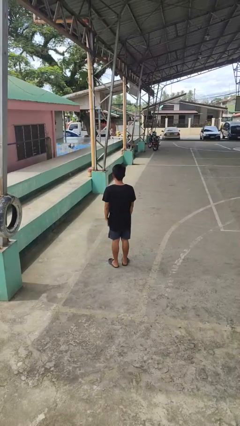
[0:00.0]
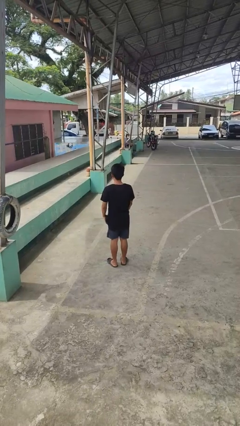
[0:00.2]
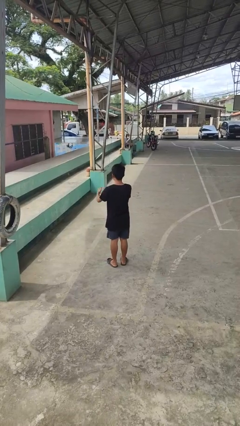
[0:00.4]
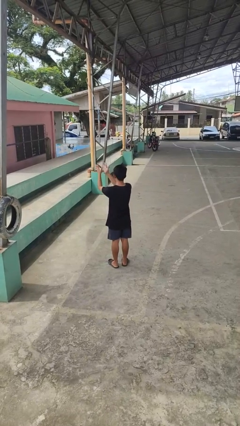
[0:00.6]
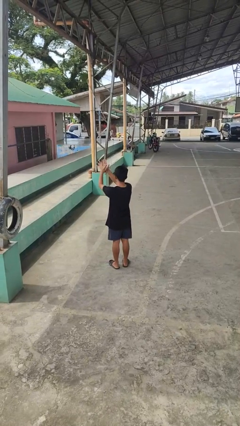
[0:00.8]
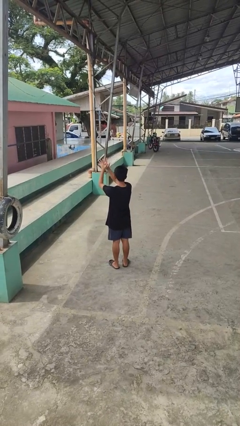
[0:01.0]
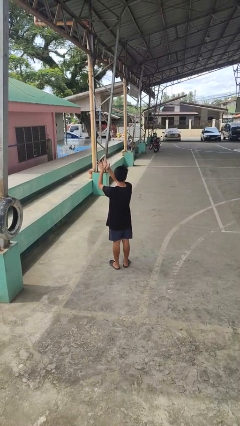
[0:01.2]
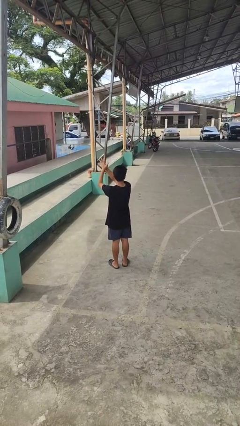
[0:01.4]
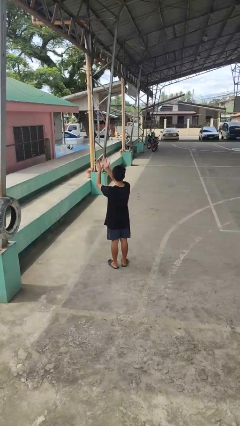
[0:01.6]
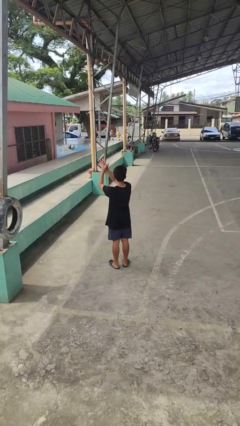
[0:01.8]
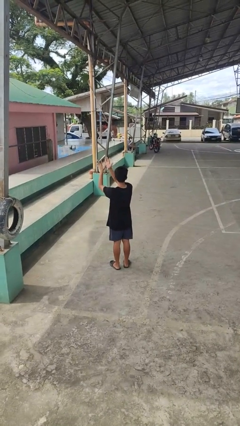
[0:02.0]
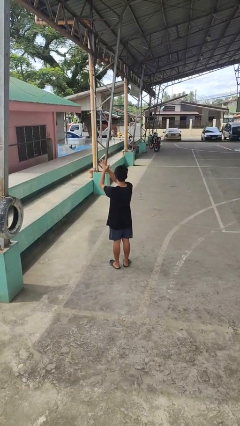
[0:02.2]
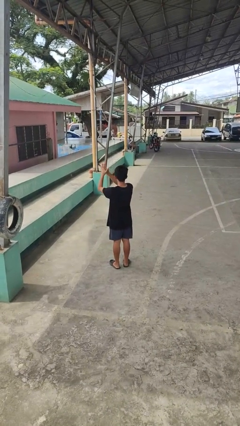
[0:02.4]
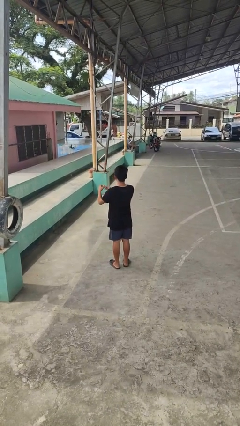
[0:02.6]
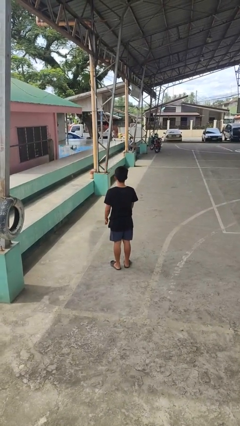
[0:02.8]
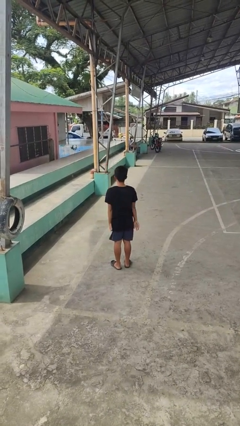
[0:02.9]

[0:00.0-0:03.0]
person claps hands

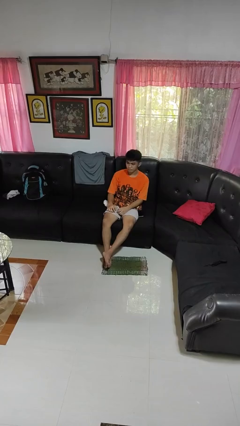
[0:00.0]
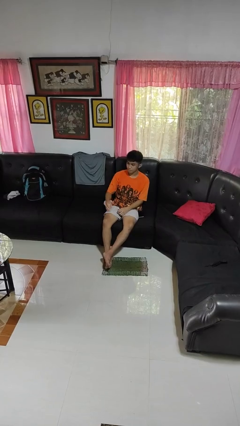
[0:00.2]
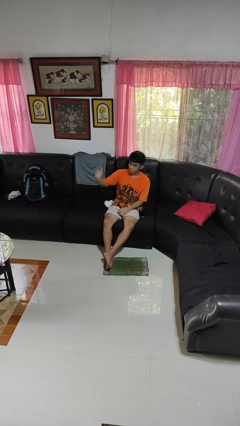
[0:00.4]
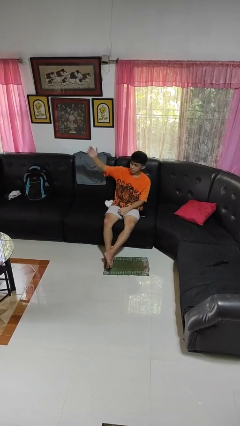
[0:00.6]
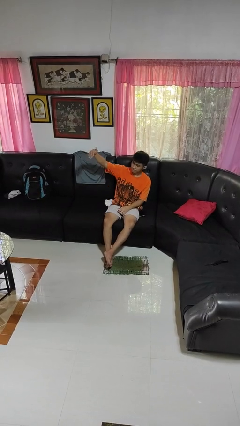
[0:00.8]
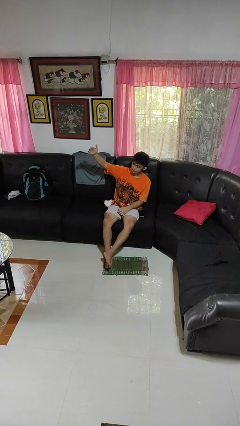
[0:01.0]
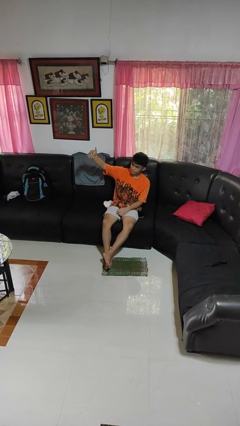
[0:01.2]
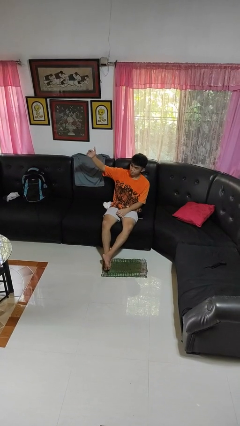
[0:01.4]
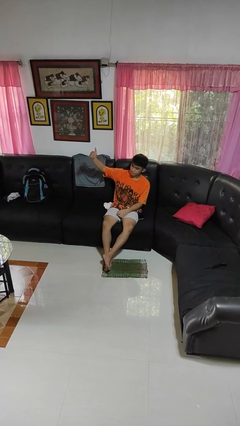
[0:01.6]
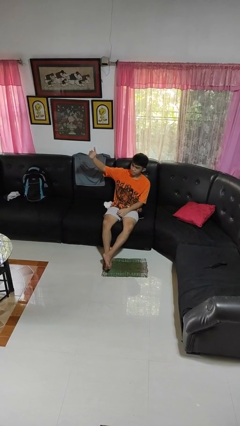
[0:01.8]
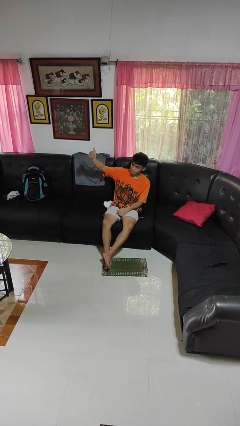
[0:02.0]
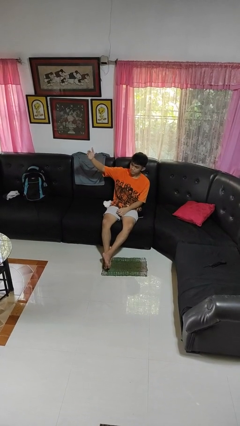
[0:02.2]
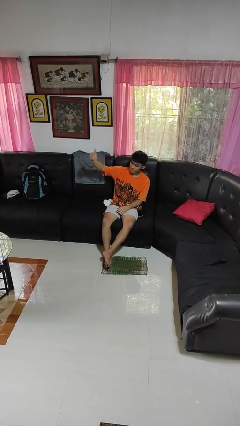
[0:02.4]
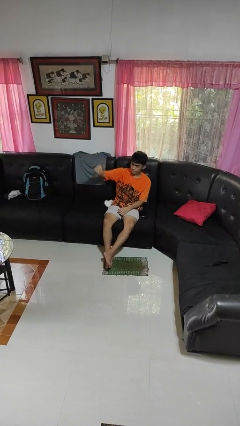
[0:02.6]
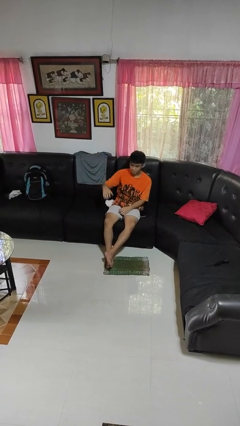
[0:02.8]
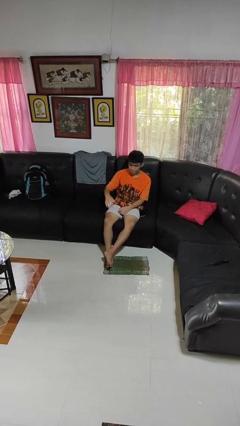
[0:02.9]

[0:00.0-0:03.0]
person gestures come here

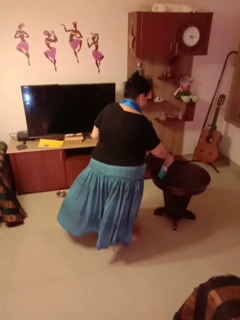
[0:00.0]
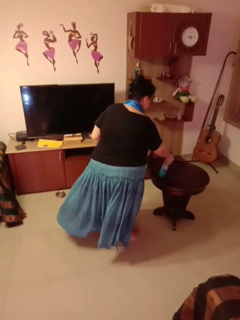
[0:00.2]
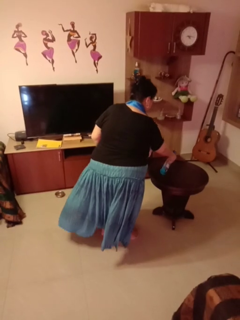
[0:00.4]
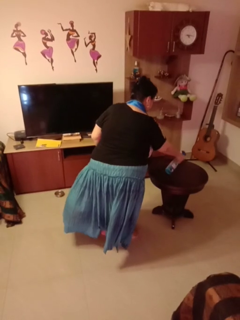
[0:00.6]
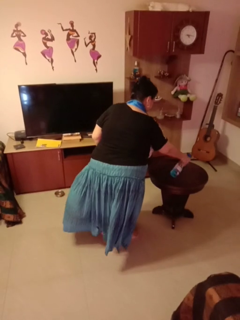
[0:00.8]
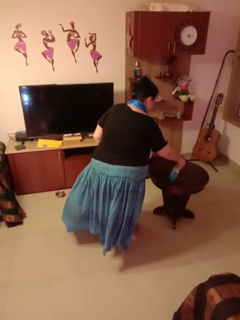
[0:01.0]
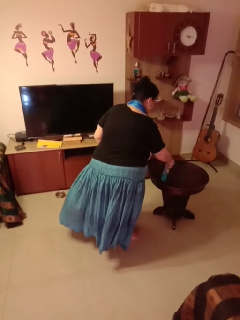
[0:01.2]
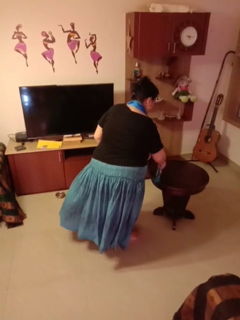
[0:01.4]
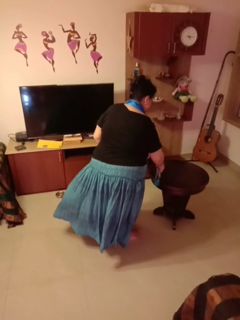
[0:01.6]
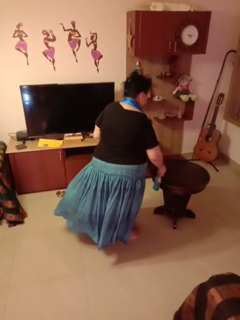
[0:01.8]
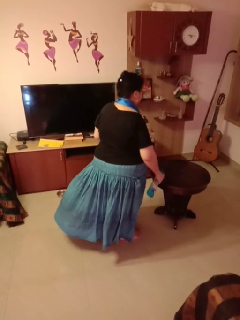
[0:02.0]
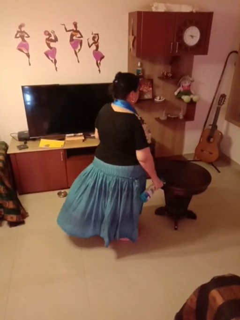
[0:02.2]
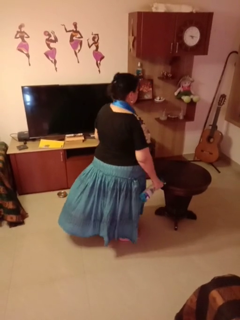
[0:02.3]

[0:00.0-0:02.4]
person sprays from bottle

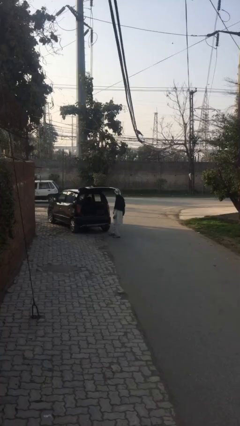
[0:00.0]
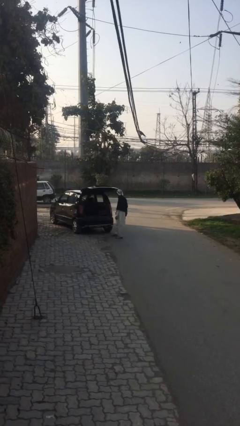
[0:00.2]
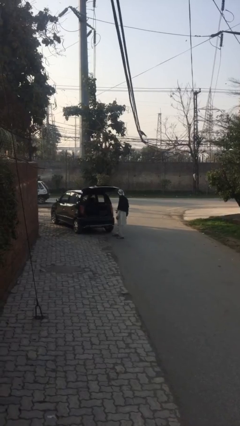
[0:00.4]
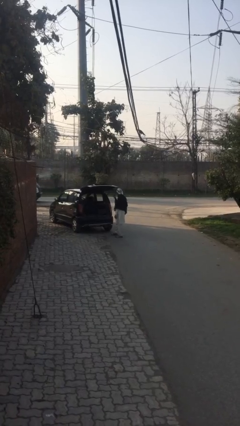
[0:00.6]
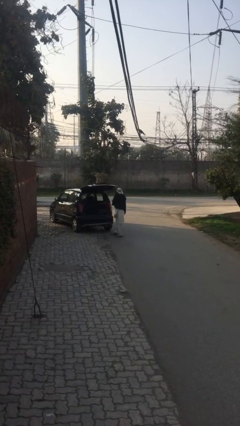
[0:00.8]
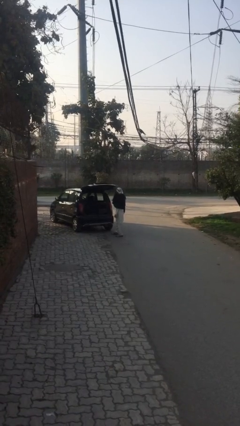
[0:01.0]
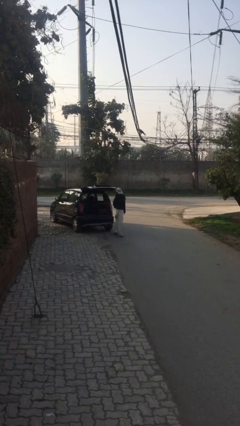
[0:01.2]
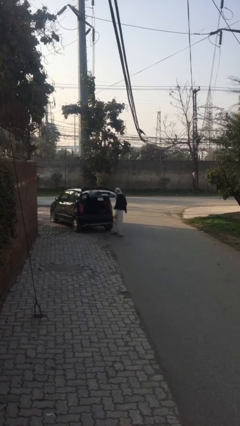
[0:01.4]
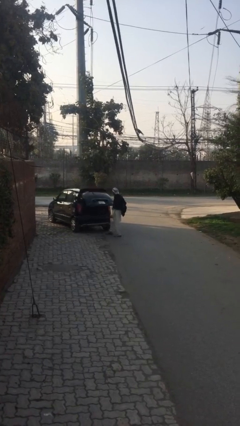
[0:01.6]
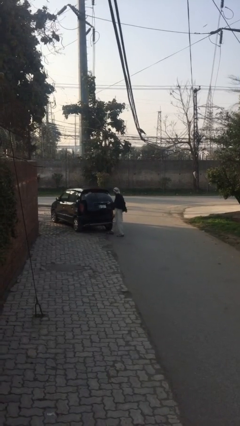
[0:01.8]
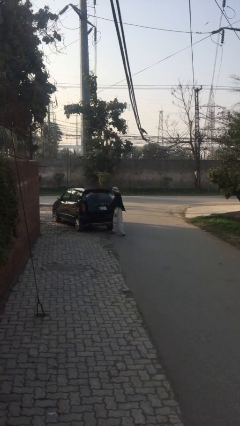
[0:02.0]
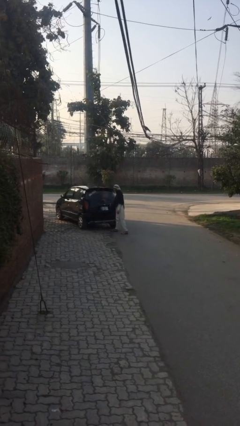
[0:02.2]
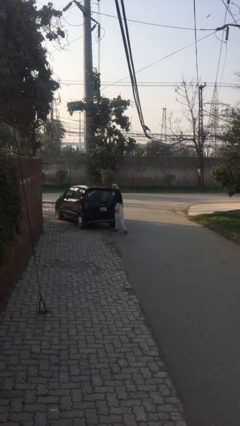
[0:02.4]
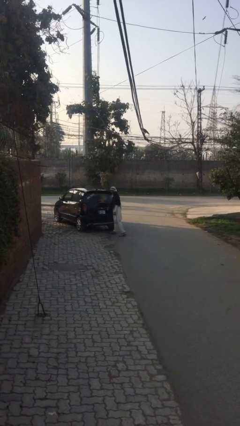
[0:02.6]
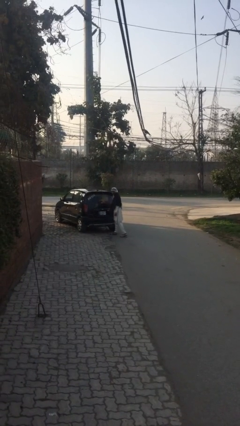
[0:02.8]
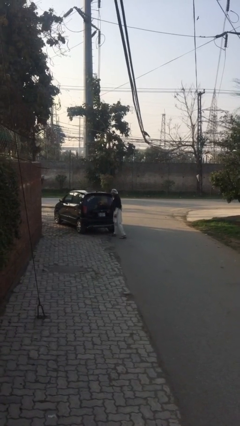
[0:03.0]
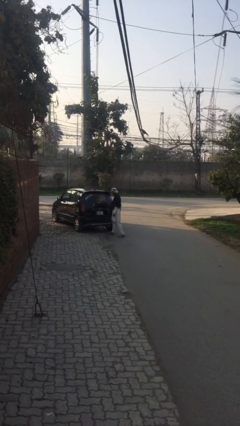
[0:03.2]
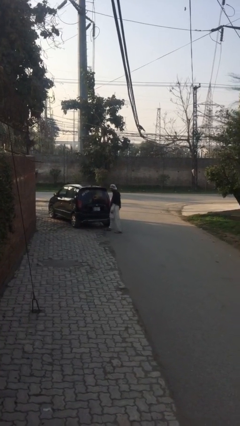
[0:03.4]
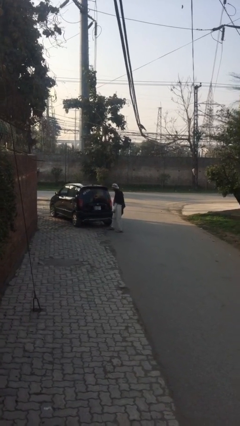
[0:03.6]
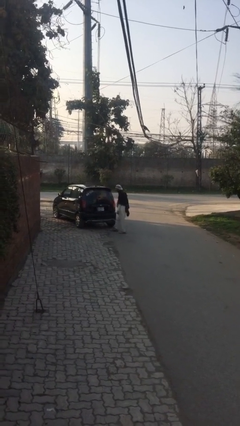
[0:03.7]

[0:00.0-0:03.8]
person closes car trunk

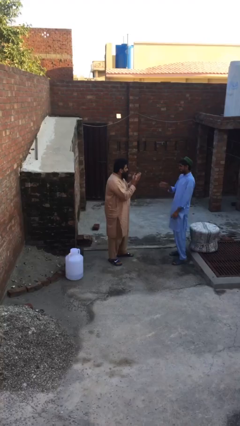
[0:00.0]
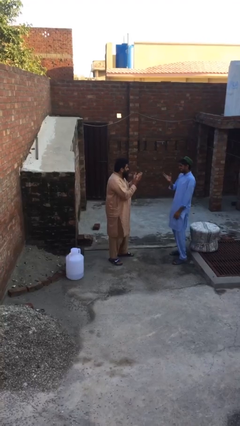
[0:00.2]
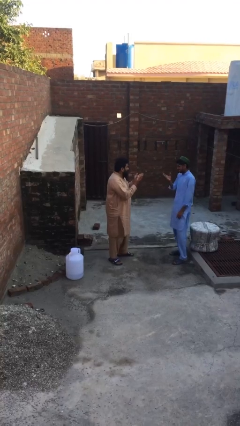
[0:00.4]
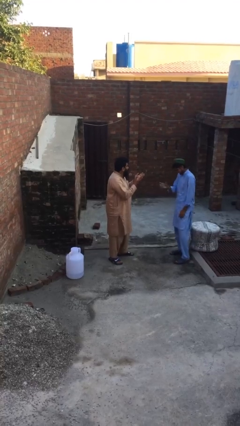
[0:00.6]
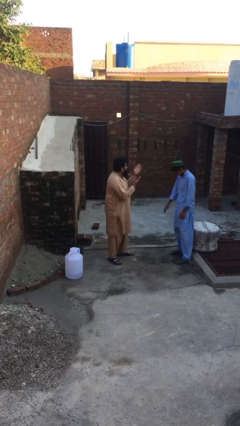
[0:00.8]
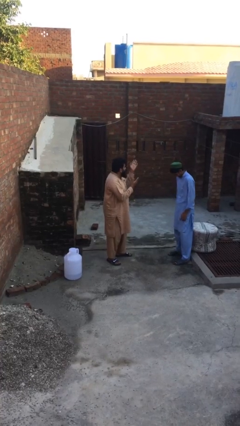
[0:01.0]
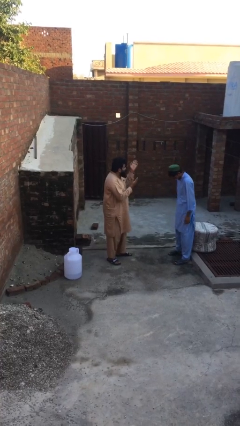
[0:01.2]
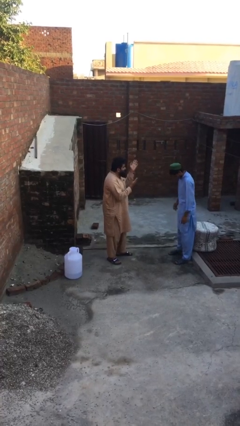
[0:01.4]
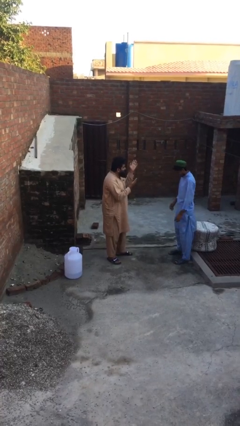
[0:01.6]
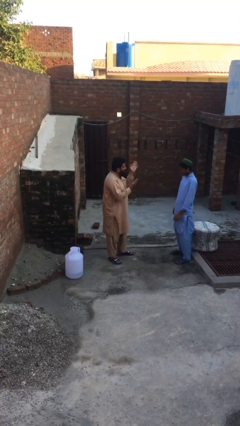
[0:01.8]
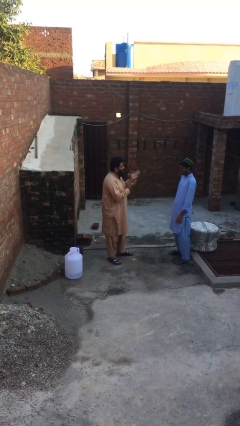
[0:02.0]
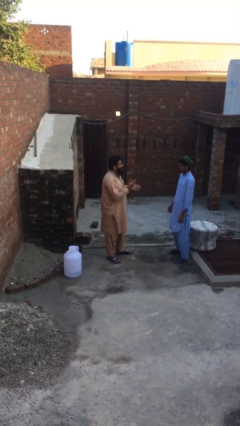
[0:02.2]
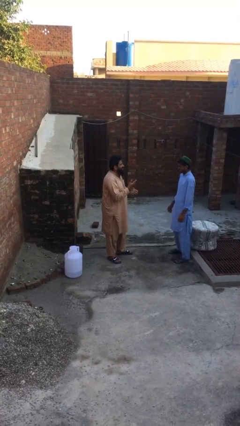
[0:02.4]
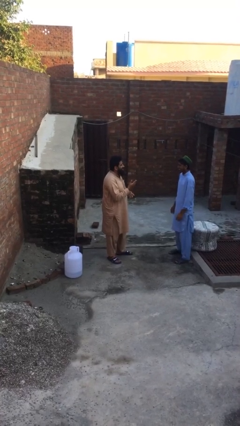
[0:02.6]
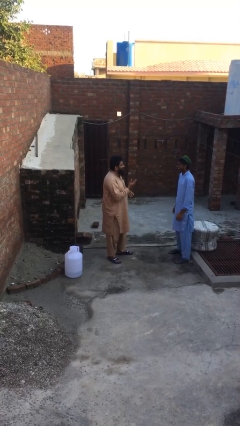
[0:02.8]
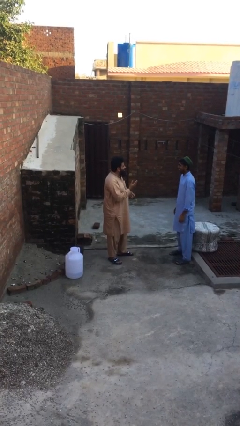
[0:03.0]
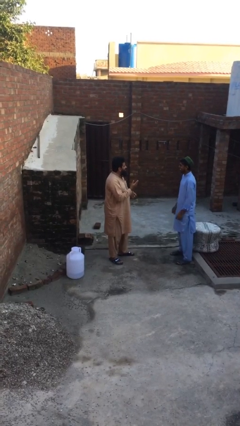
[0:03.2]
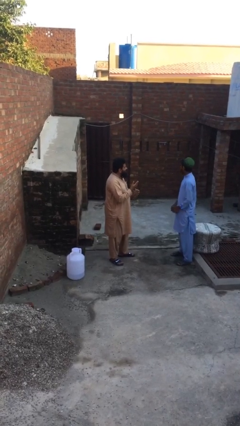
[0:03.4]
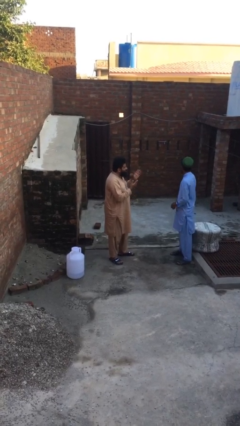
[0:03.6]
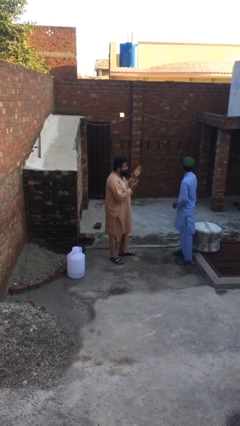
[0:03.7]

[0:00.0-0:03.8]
person talks to person

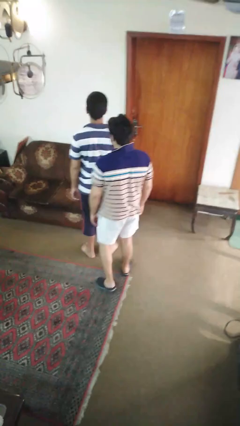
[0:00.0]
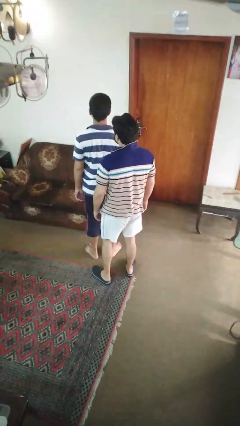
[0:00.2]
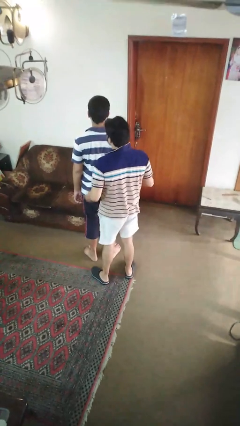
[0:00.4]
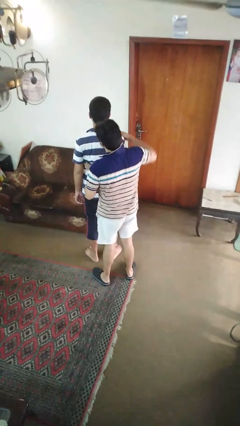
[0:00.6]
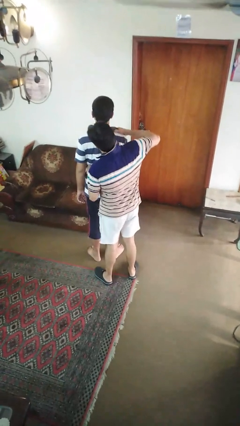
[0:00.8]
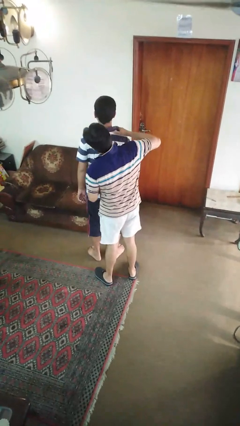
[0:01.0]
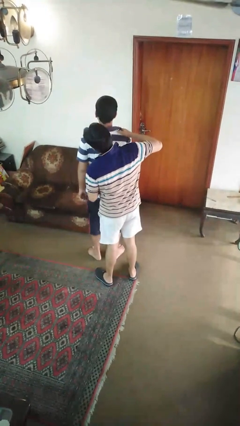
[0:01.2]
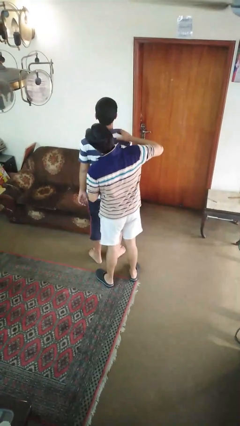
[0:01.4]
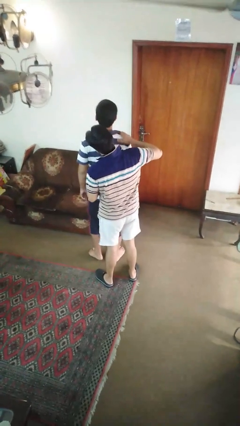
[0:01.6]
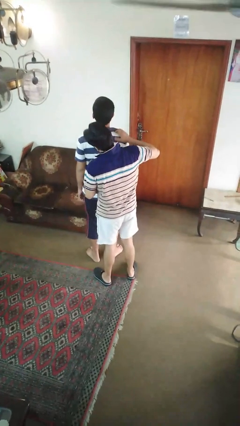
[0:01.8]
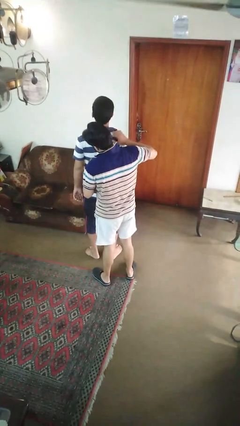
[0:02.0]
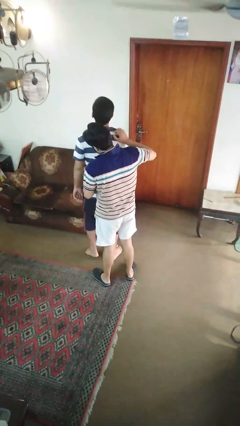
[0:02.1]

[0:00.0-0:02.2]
person tickles person
